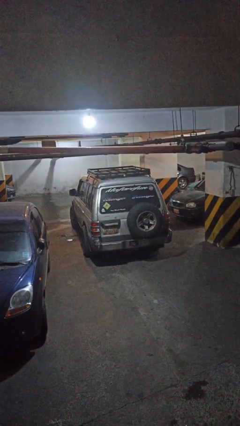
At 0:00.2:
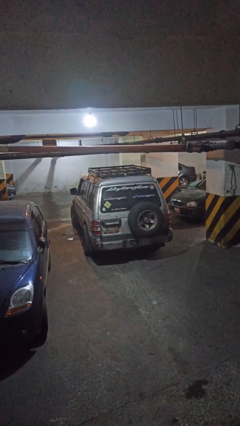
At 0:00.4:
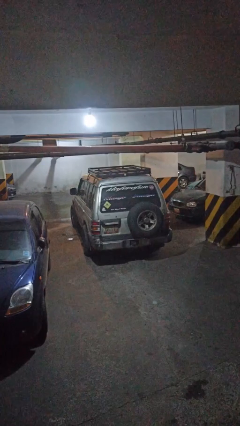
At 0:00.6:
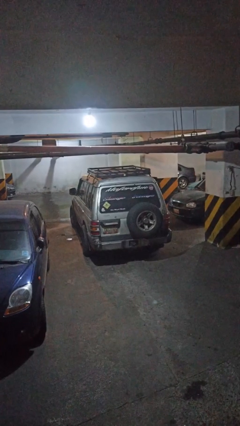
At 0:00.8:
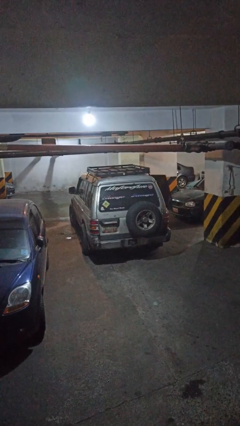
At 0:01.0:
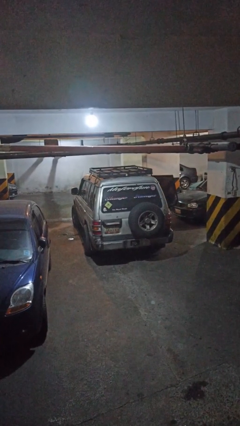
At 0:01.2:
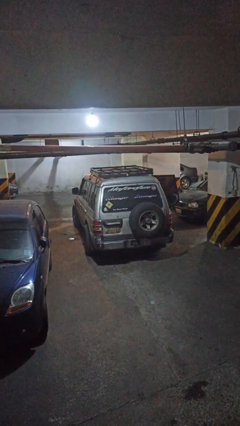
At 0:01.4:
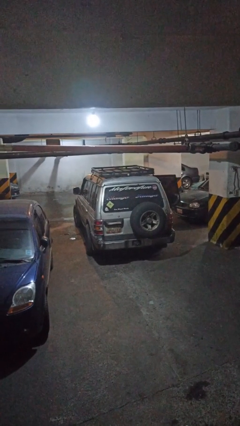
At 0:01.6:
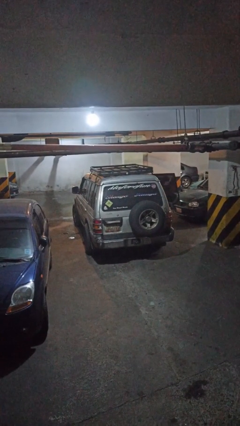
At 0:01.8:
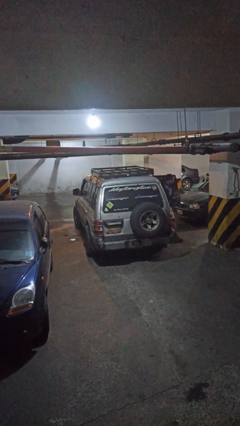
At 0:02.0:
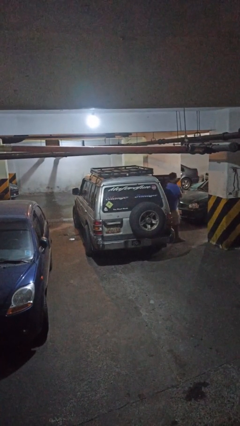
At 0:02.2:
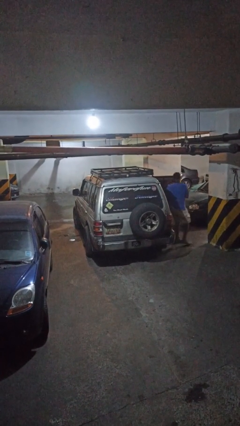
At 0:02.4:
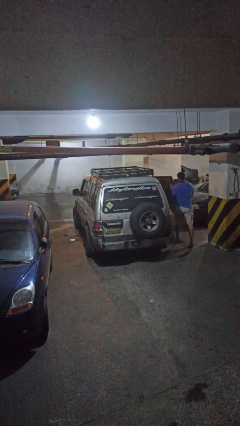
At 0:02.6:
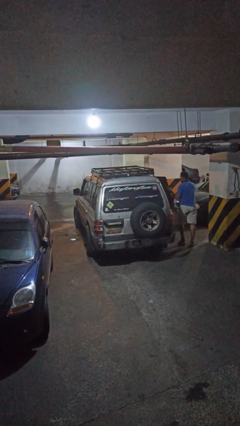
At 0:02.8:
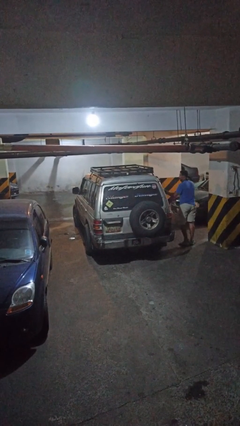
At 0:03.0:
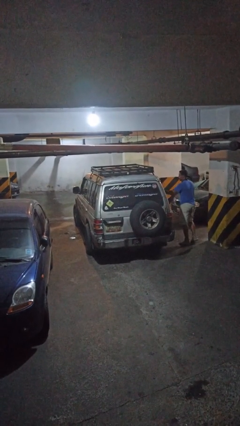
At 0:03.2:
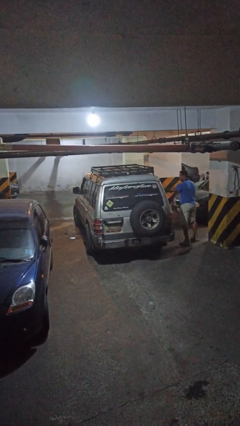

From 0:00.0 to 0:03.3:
car drops off person

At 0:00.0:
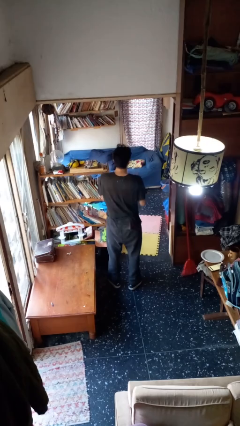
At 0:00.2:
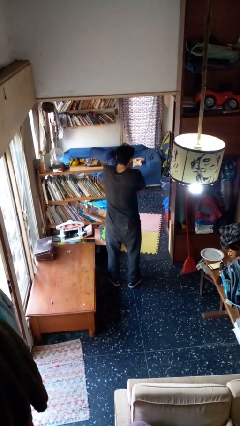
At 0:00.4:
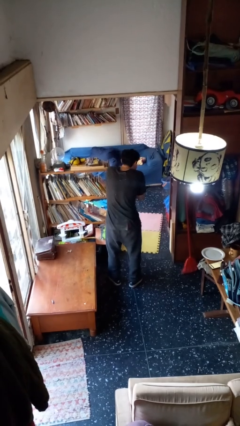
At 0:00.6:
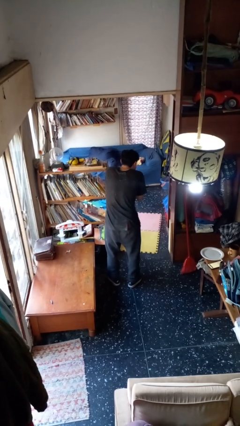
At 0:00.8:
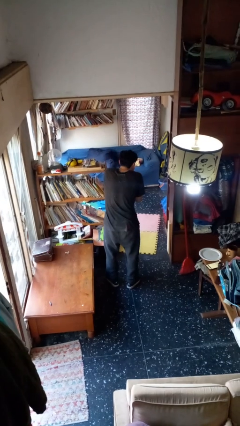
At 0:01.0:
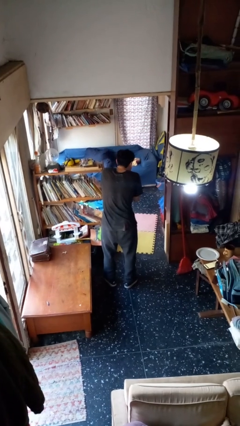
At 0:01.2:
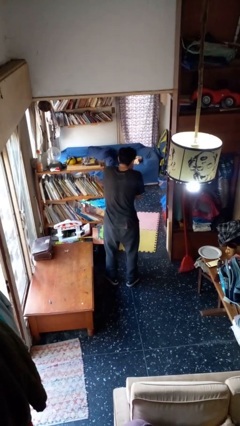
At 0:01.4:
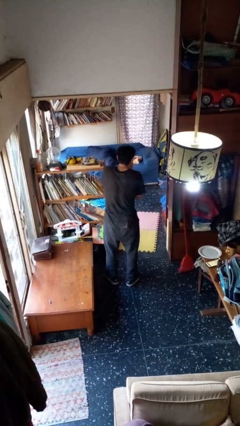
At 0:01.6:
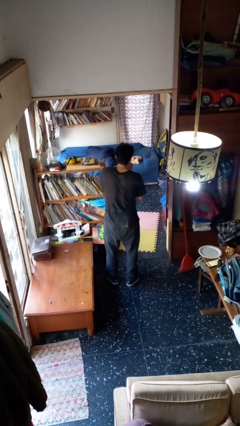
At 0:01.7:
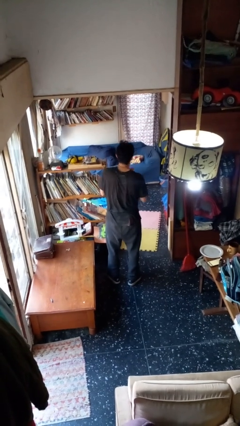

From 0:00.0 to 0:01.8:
person sneezes into hand

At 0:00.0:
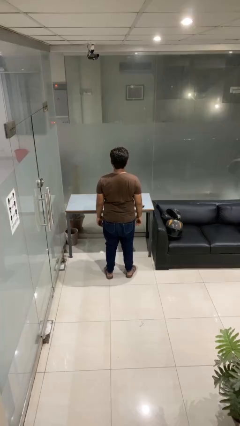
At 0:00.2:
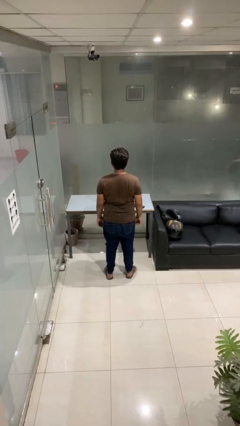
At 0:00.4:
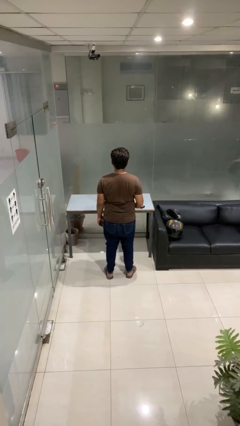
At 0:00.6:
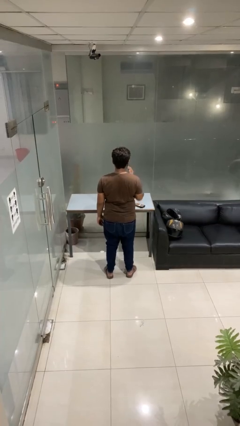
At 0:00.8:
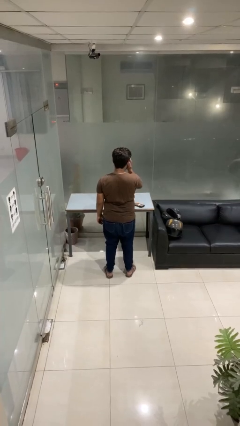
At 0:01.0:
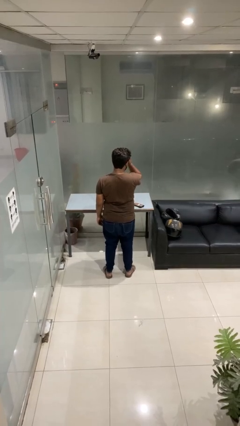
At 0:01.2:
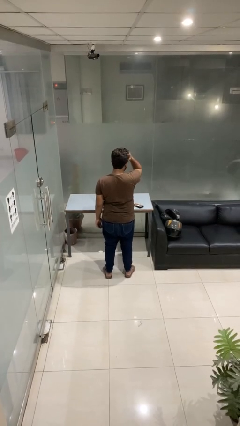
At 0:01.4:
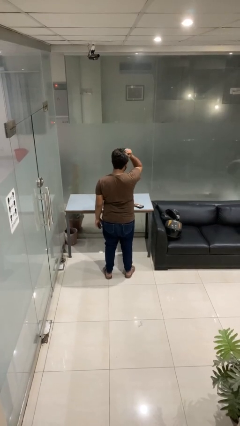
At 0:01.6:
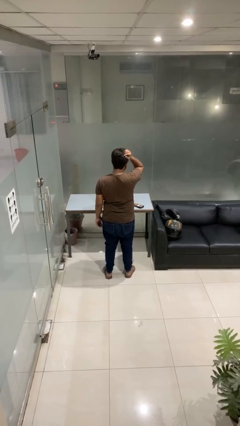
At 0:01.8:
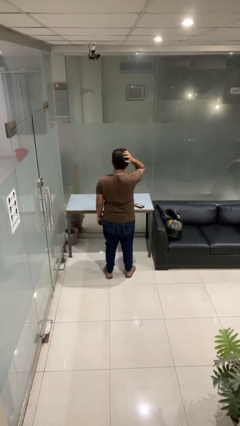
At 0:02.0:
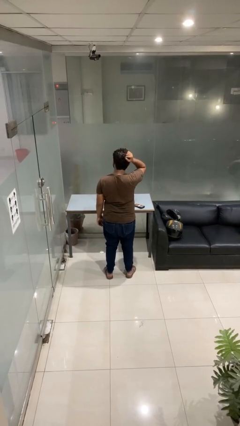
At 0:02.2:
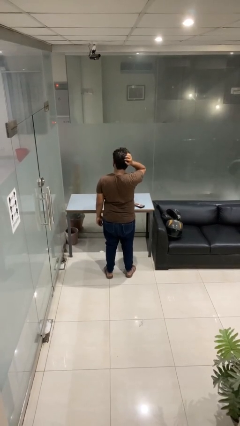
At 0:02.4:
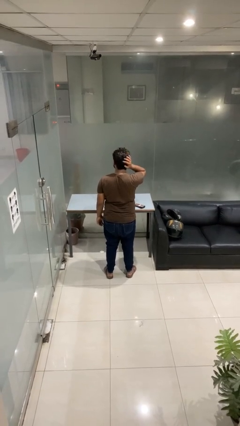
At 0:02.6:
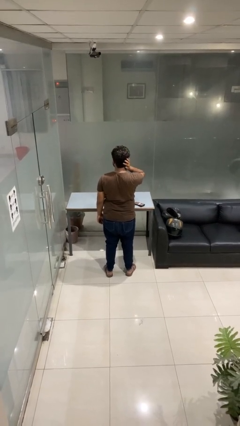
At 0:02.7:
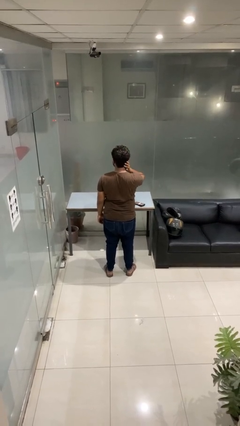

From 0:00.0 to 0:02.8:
person strokes hair

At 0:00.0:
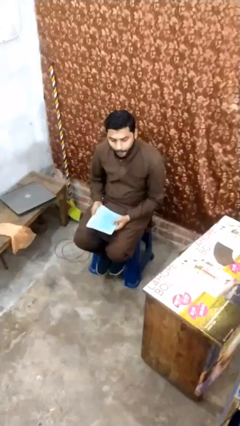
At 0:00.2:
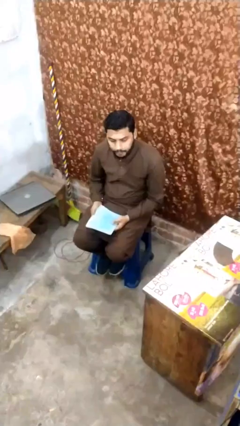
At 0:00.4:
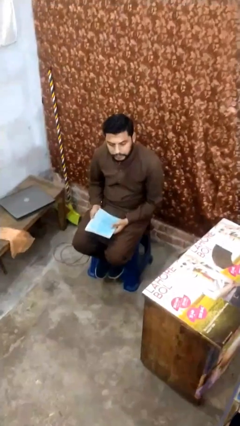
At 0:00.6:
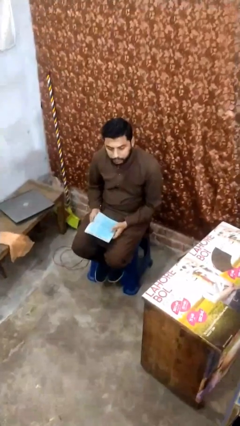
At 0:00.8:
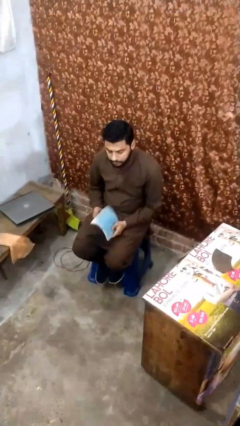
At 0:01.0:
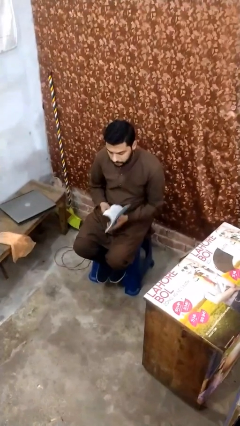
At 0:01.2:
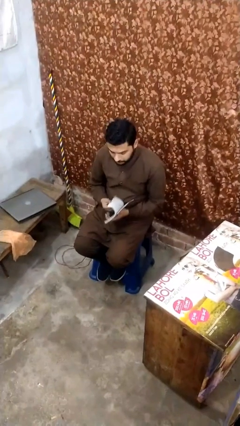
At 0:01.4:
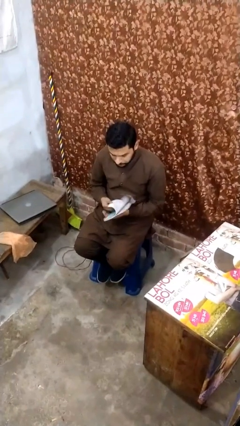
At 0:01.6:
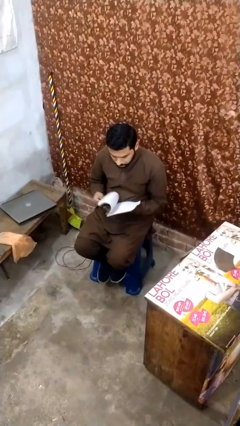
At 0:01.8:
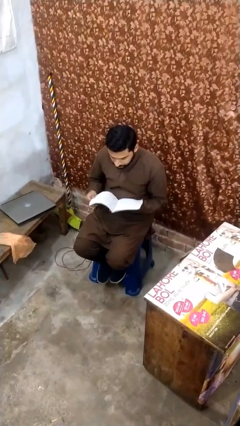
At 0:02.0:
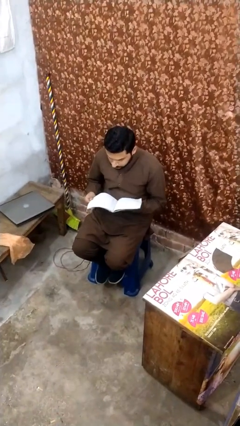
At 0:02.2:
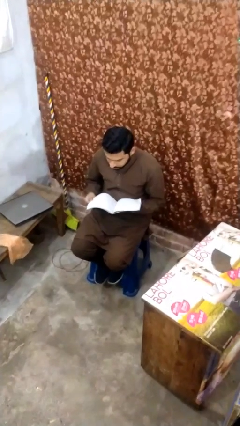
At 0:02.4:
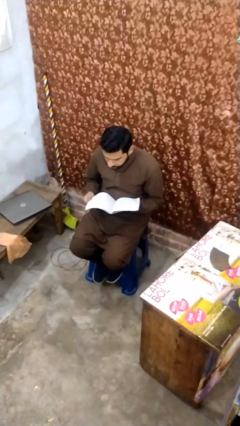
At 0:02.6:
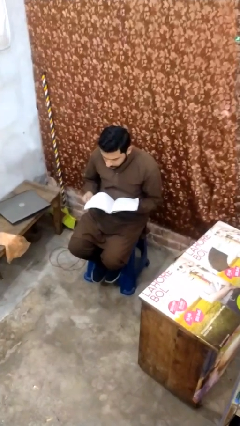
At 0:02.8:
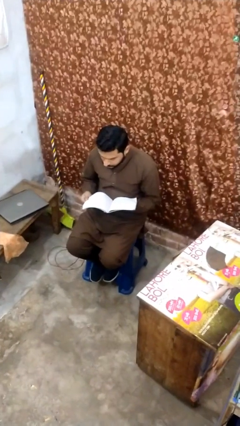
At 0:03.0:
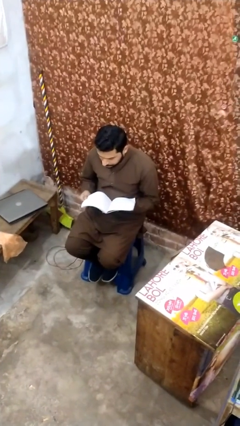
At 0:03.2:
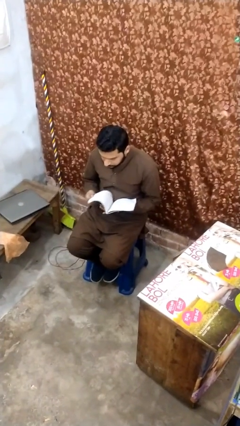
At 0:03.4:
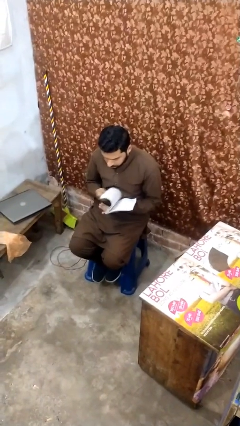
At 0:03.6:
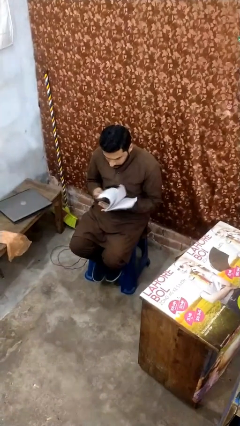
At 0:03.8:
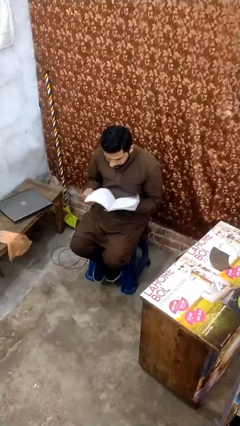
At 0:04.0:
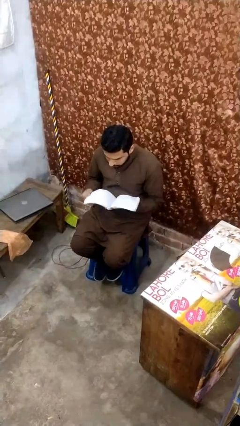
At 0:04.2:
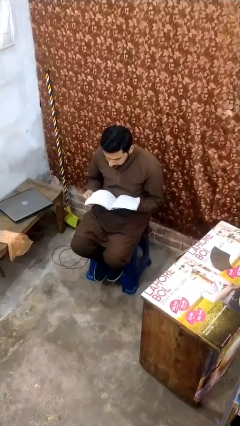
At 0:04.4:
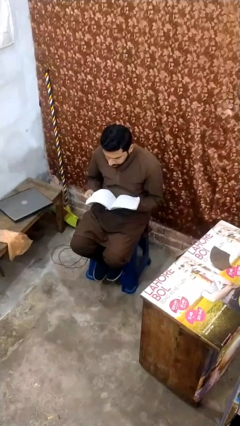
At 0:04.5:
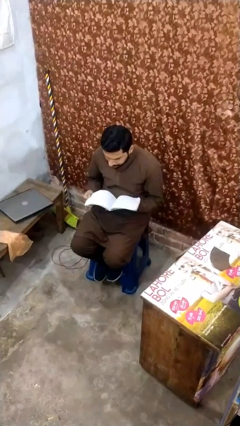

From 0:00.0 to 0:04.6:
person reads document

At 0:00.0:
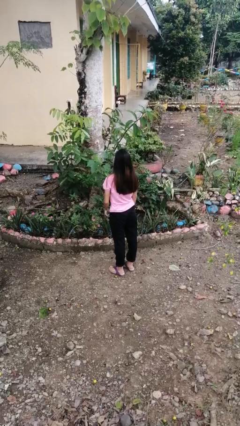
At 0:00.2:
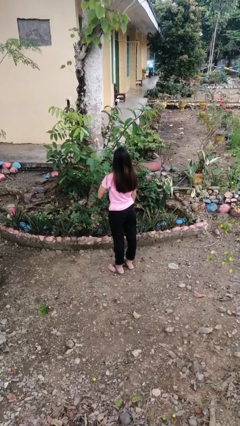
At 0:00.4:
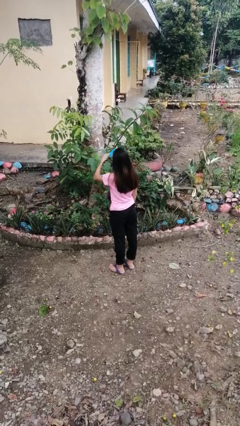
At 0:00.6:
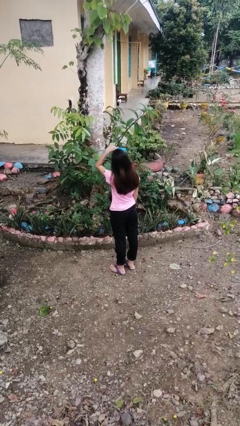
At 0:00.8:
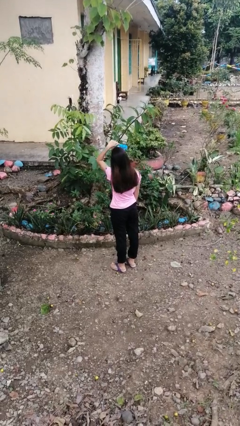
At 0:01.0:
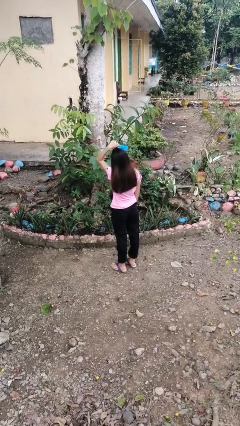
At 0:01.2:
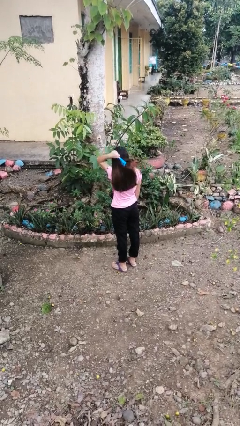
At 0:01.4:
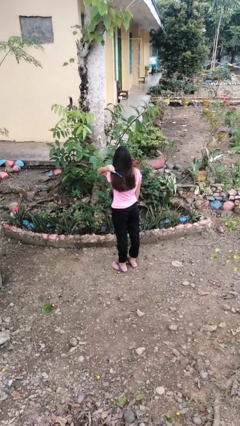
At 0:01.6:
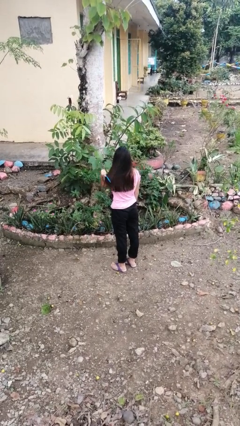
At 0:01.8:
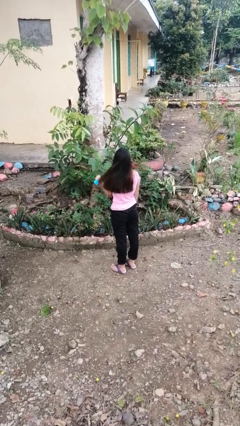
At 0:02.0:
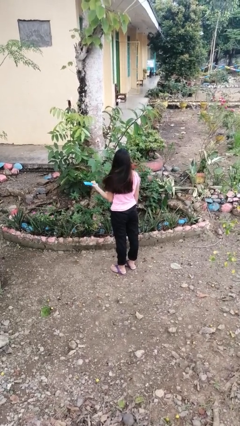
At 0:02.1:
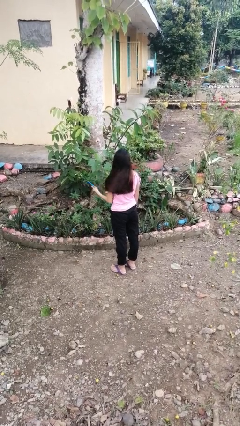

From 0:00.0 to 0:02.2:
person brushes hair

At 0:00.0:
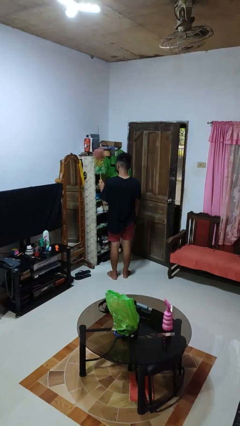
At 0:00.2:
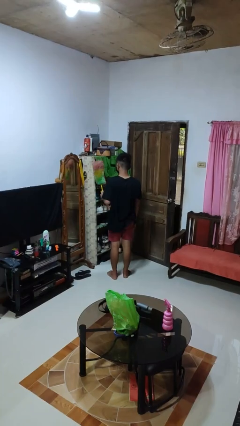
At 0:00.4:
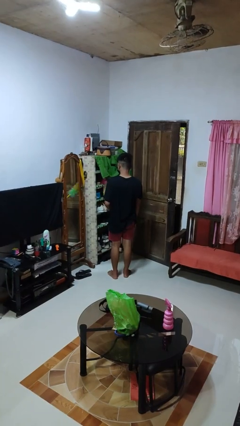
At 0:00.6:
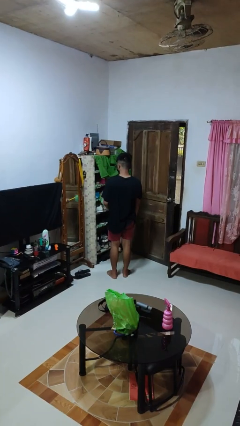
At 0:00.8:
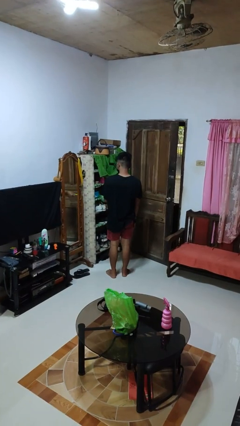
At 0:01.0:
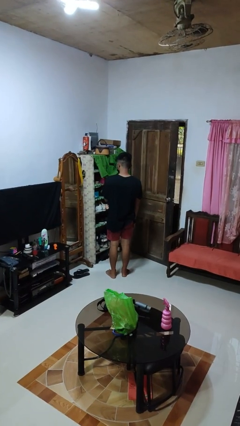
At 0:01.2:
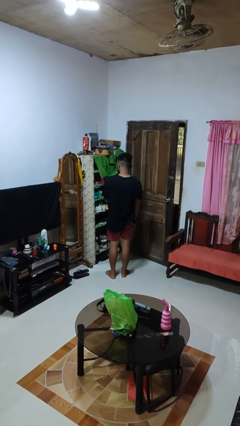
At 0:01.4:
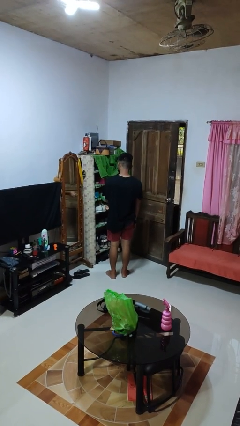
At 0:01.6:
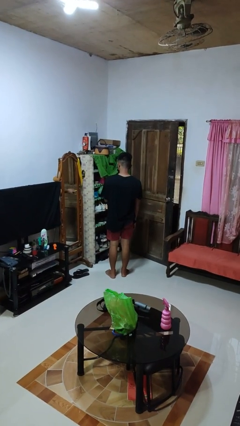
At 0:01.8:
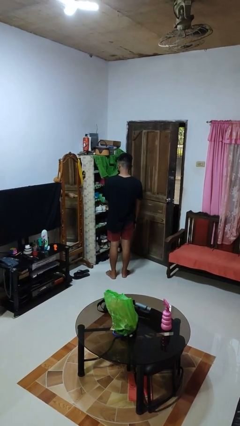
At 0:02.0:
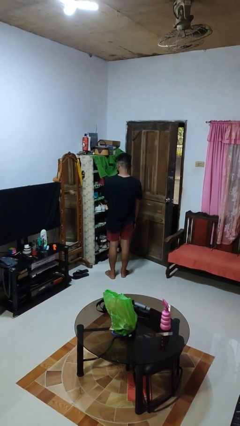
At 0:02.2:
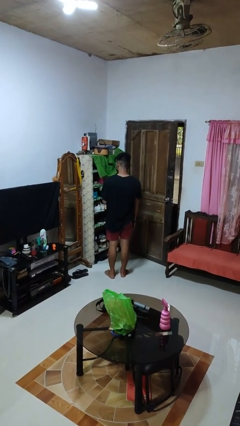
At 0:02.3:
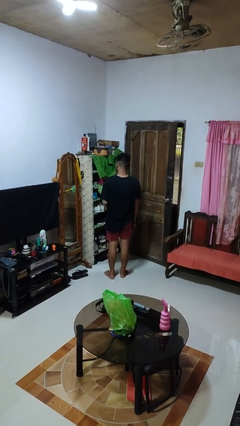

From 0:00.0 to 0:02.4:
person dusts furniture
